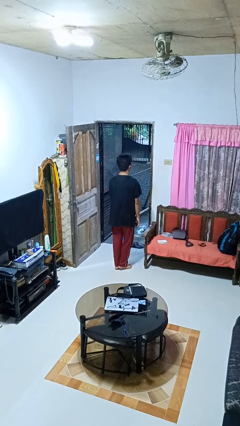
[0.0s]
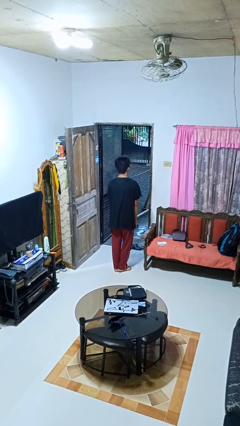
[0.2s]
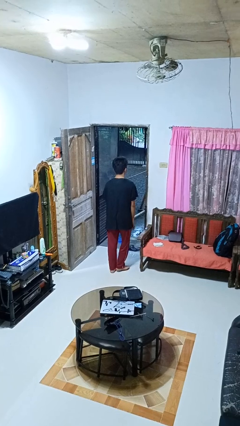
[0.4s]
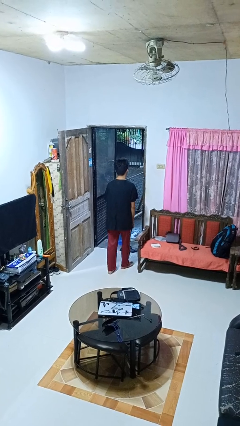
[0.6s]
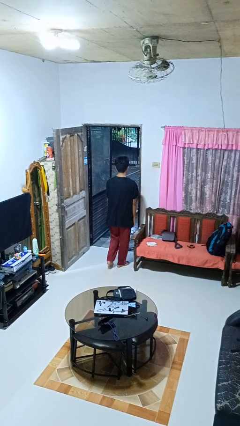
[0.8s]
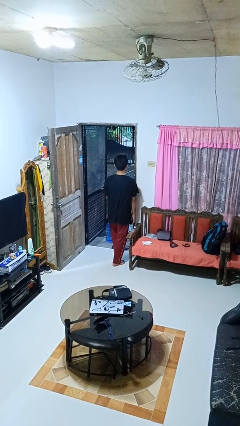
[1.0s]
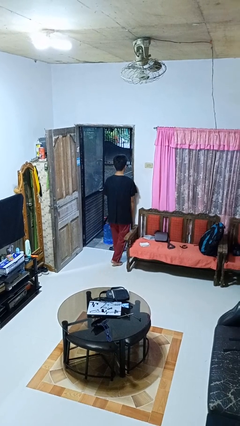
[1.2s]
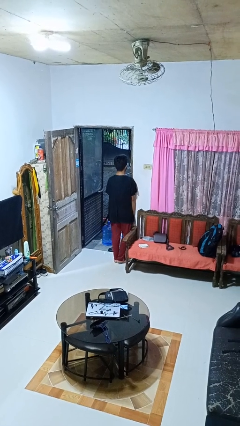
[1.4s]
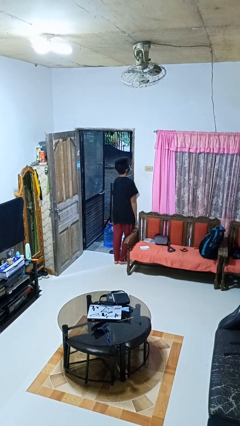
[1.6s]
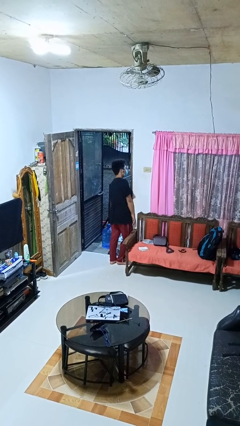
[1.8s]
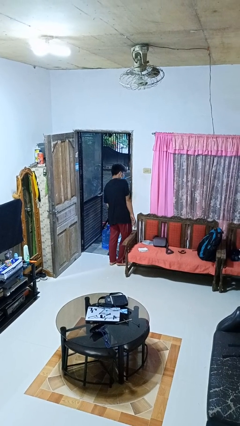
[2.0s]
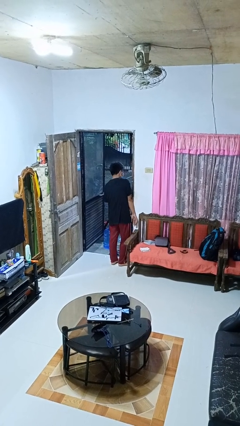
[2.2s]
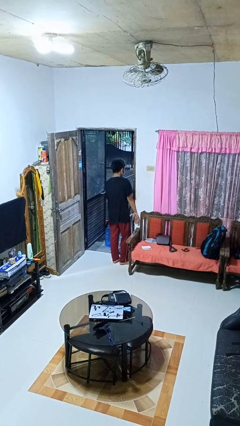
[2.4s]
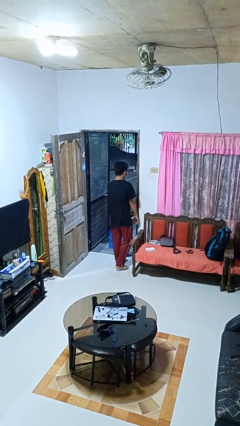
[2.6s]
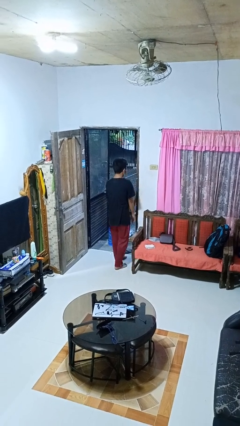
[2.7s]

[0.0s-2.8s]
person bumps into wall

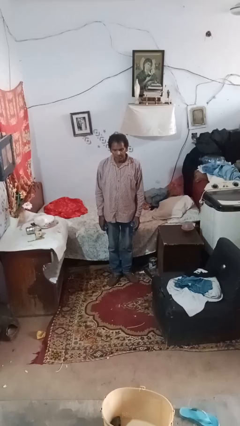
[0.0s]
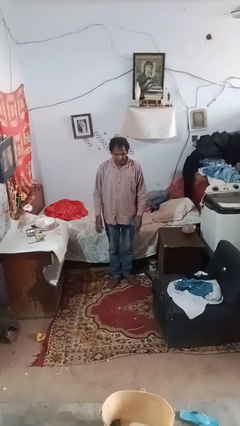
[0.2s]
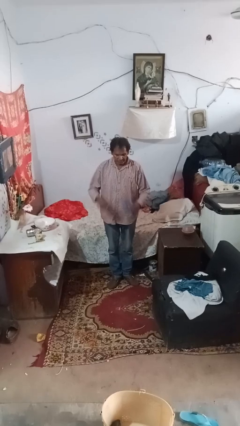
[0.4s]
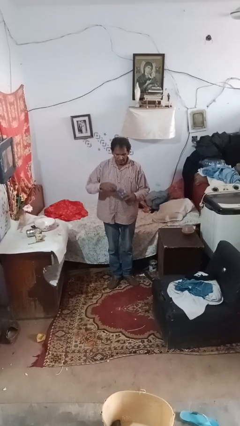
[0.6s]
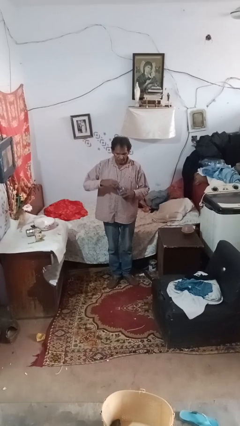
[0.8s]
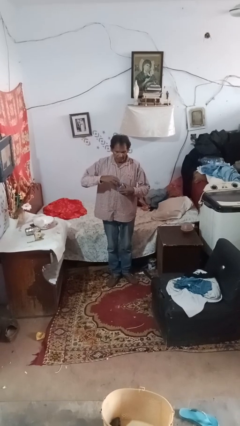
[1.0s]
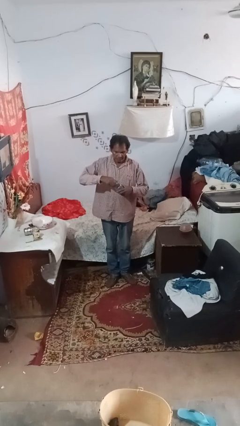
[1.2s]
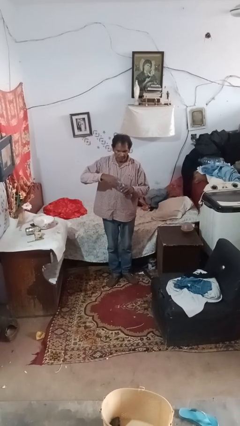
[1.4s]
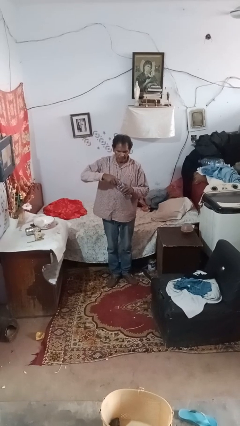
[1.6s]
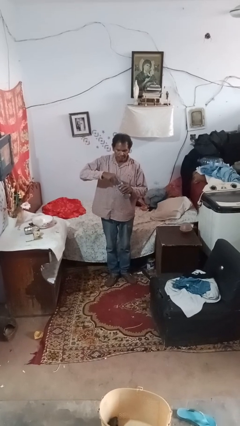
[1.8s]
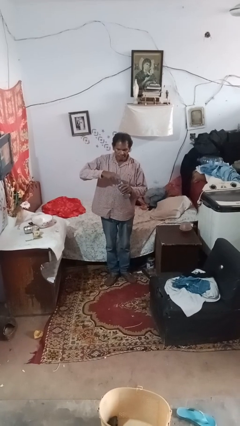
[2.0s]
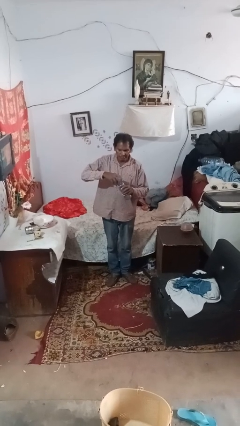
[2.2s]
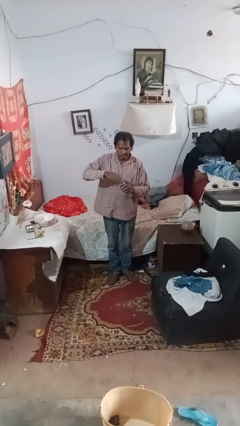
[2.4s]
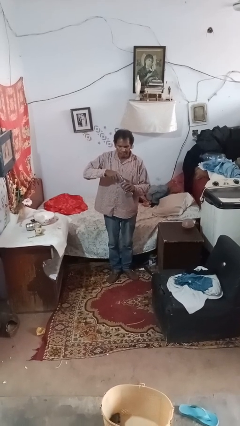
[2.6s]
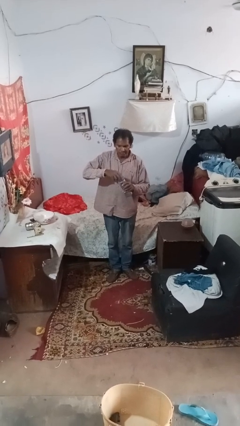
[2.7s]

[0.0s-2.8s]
person screws lid to bottle

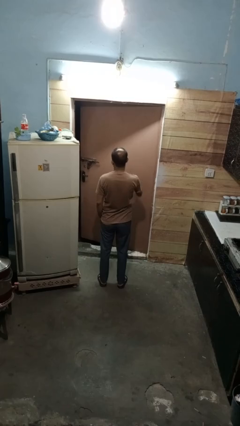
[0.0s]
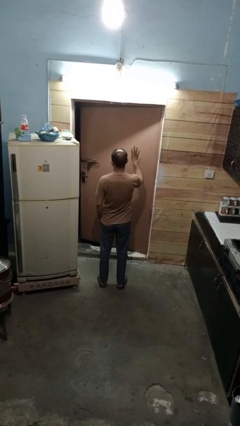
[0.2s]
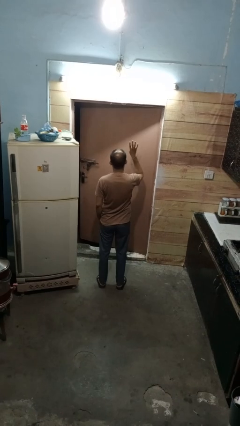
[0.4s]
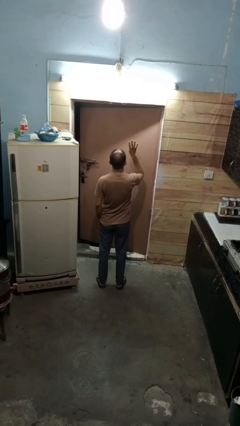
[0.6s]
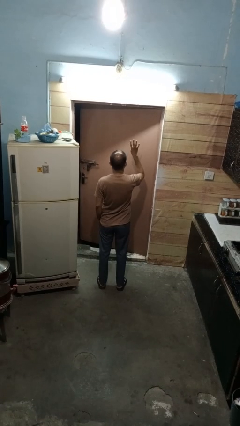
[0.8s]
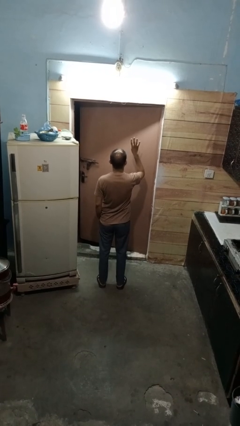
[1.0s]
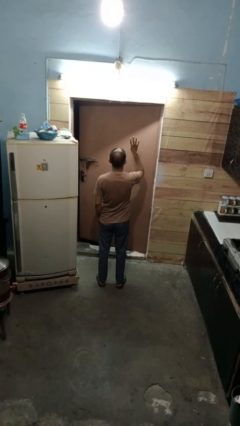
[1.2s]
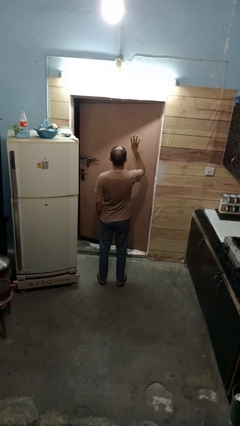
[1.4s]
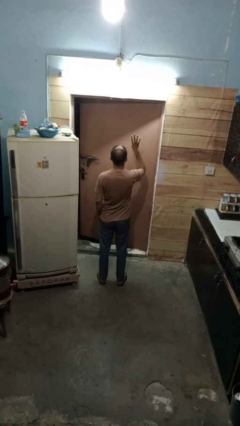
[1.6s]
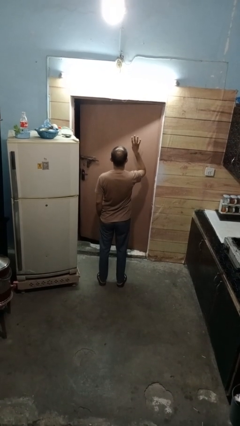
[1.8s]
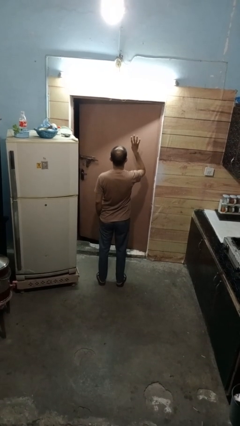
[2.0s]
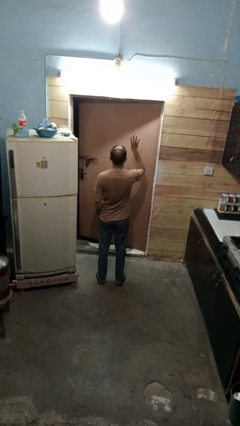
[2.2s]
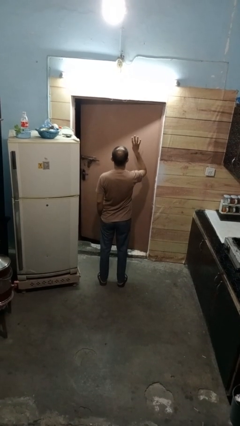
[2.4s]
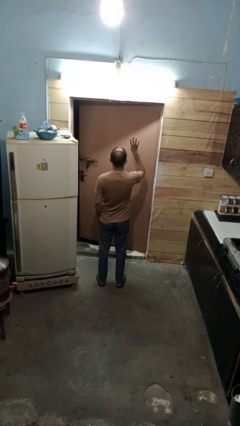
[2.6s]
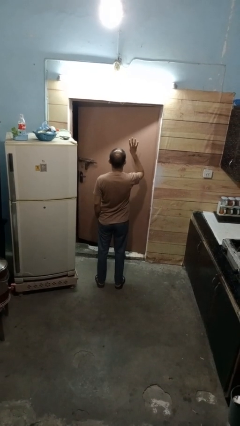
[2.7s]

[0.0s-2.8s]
person gestures number four

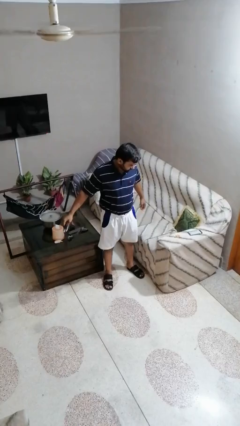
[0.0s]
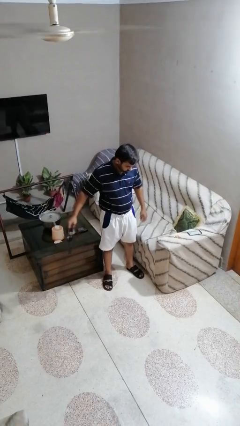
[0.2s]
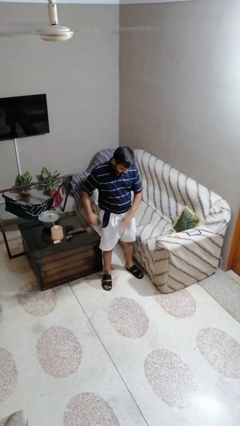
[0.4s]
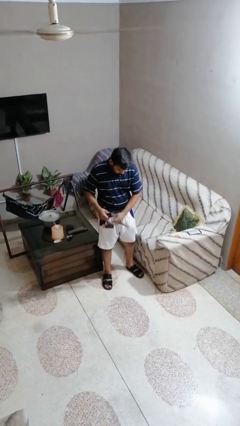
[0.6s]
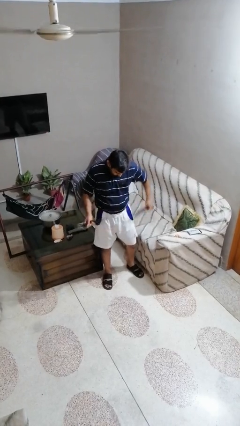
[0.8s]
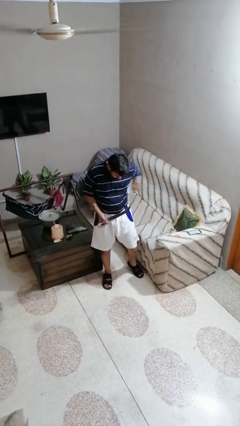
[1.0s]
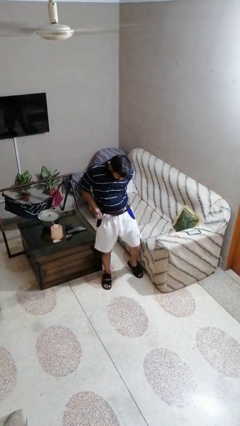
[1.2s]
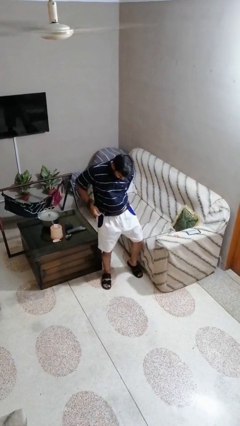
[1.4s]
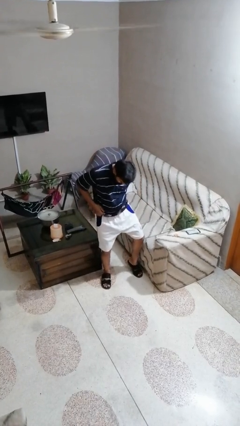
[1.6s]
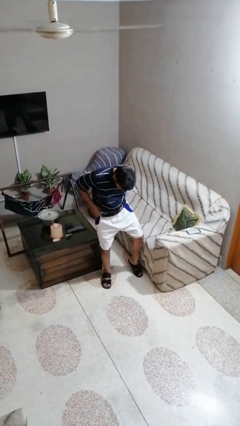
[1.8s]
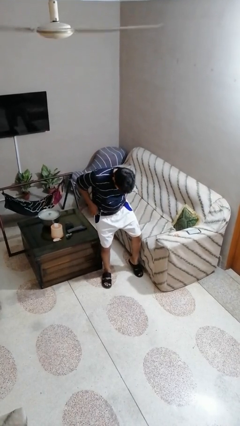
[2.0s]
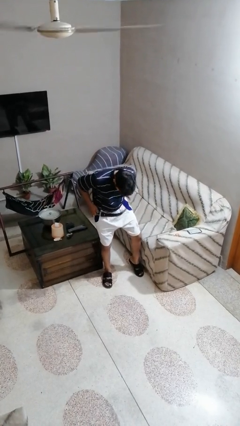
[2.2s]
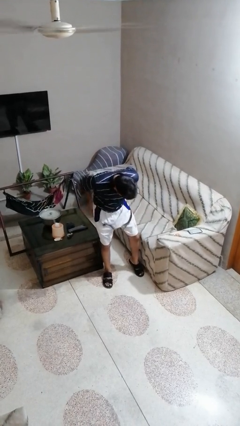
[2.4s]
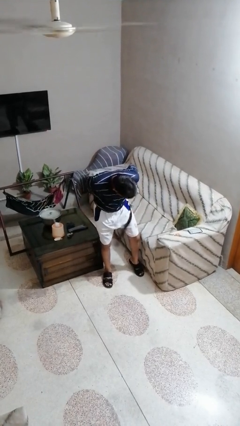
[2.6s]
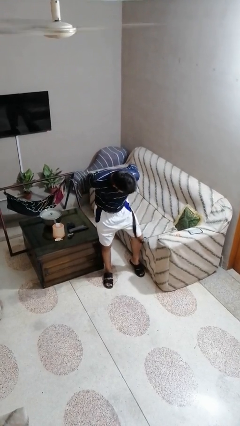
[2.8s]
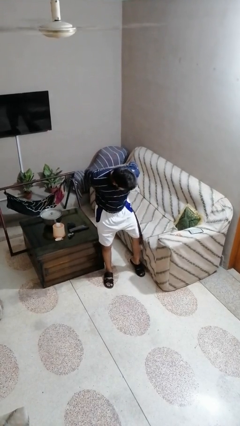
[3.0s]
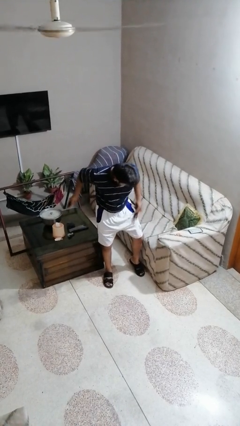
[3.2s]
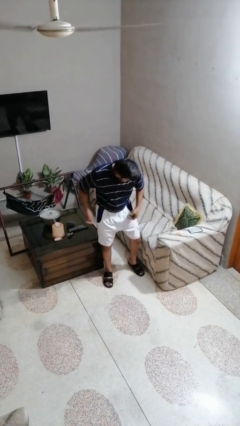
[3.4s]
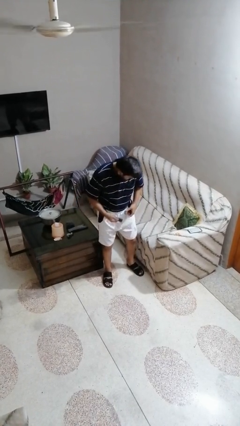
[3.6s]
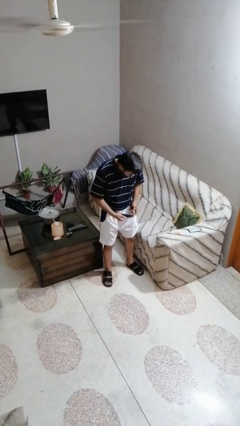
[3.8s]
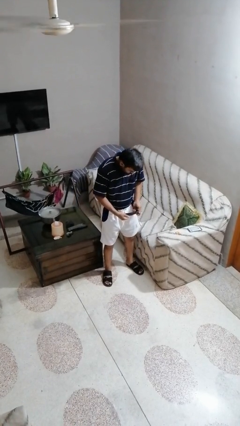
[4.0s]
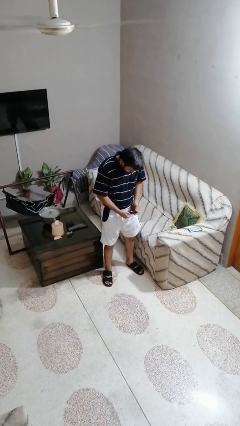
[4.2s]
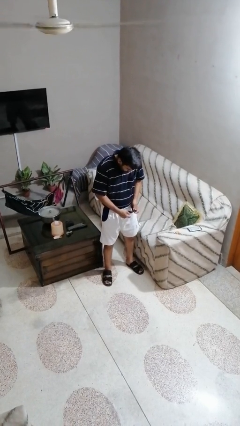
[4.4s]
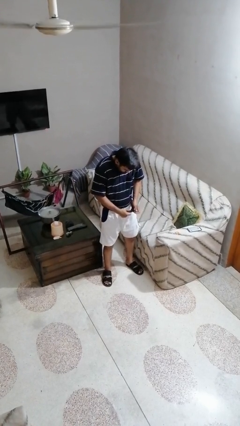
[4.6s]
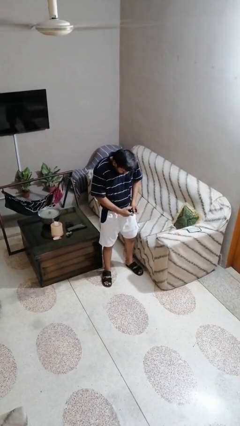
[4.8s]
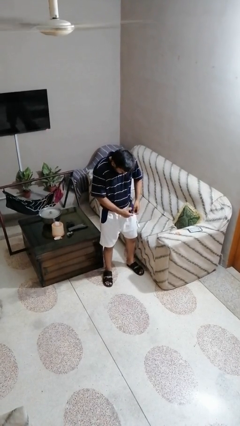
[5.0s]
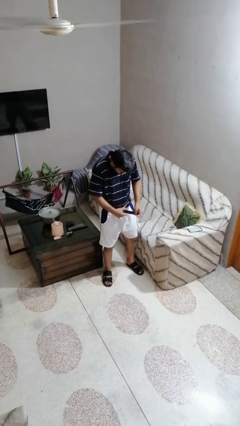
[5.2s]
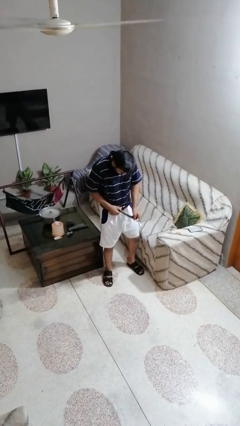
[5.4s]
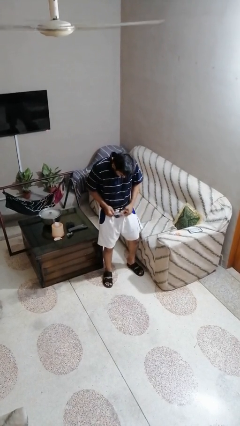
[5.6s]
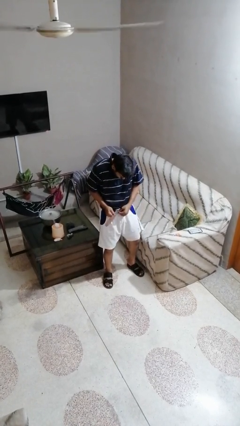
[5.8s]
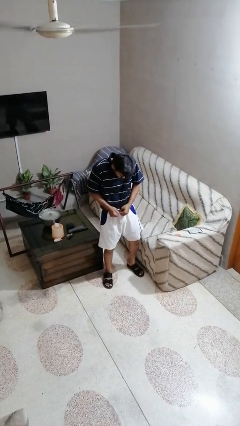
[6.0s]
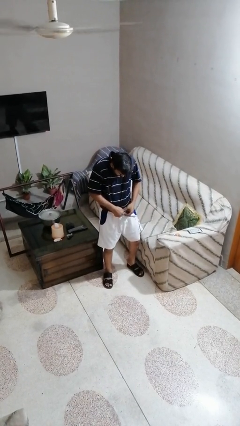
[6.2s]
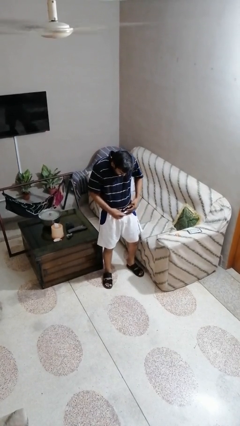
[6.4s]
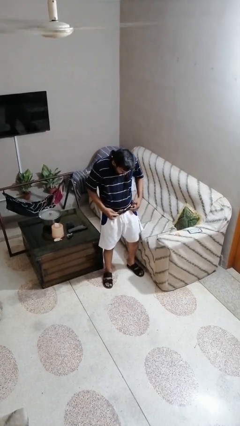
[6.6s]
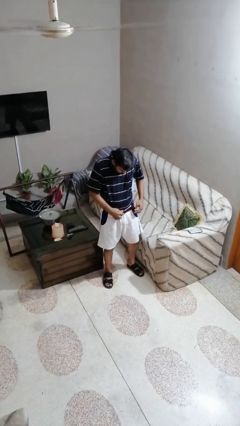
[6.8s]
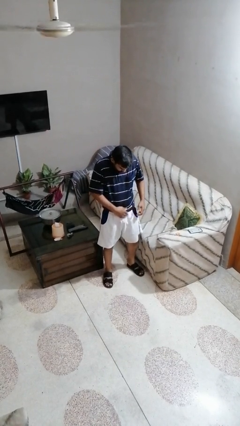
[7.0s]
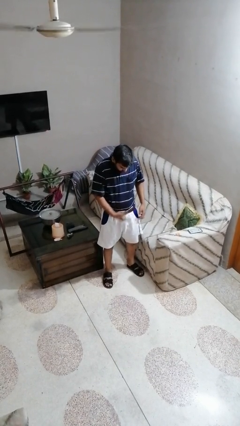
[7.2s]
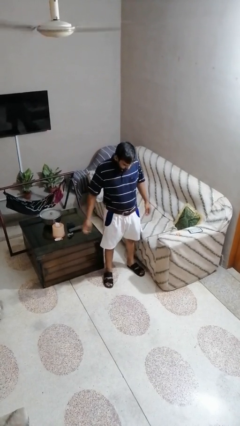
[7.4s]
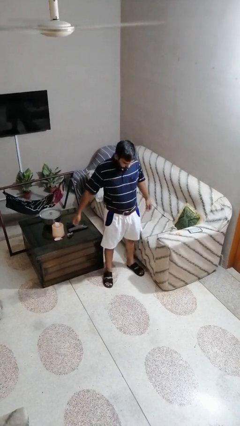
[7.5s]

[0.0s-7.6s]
person puts on belt

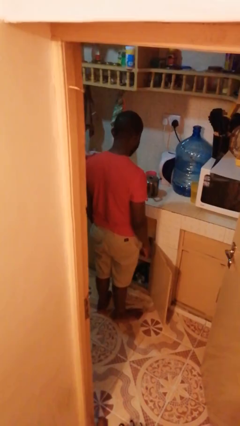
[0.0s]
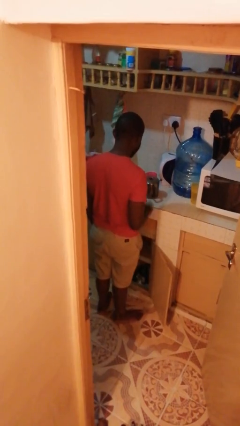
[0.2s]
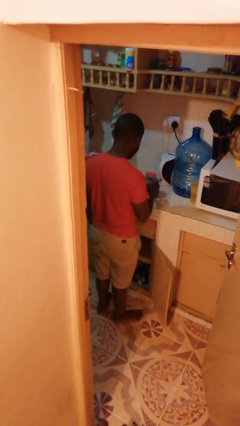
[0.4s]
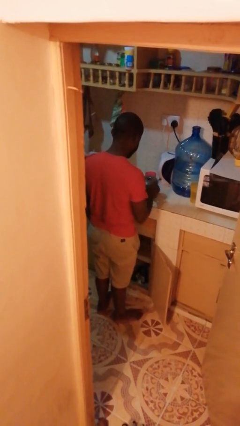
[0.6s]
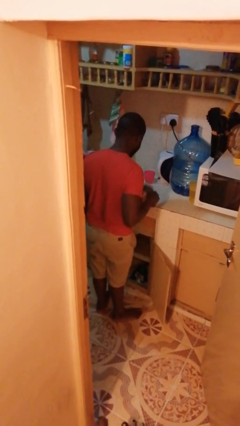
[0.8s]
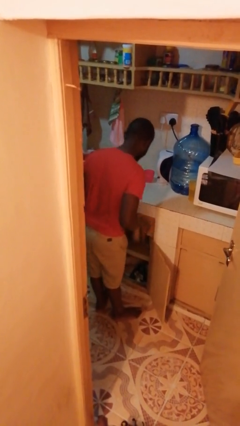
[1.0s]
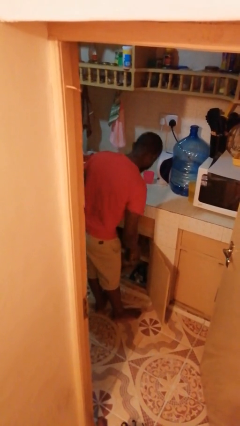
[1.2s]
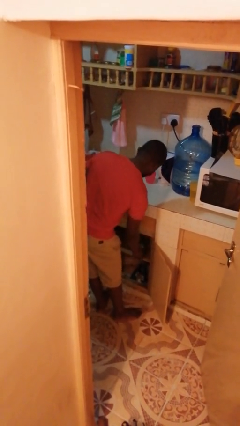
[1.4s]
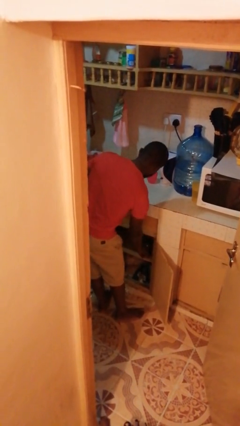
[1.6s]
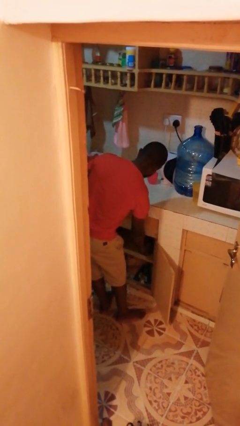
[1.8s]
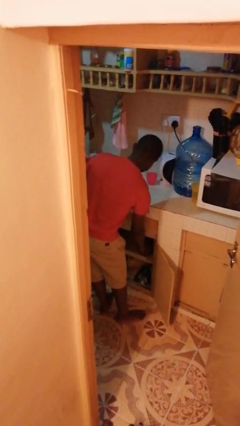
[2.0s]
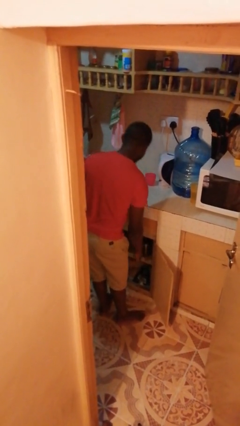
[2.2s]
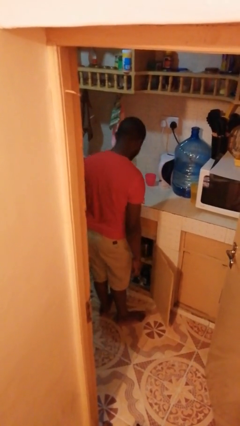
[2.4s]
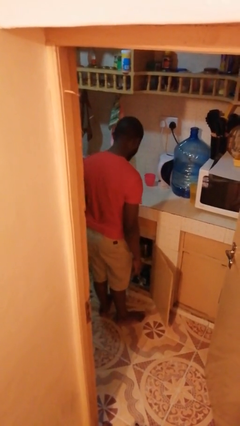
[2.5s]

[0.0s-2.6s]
person puts object in cabinet
